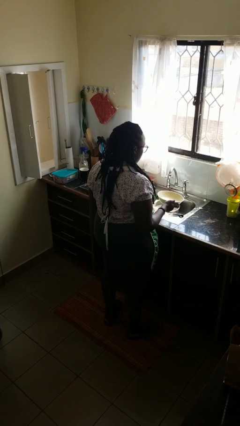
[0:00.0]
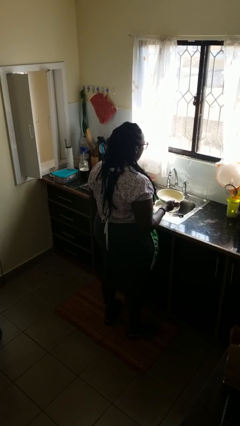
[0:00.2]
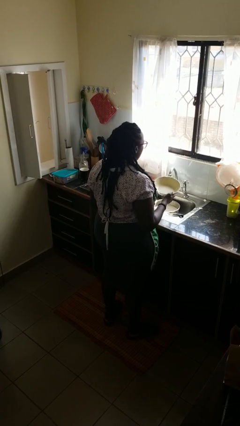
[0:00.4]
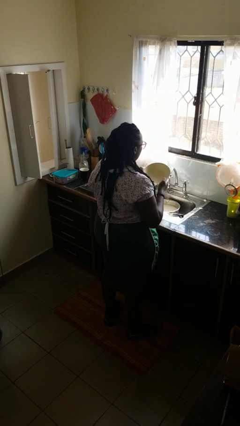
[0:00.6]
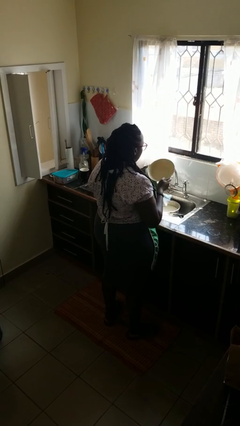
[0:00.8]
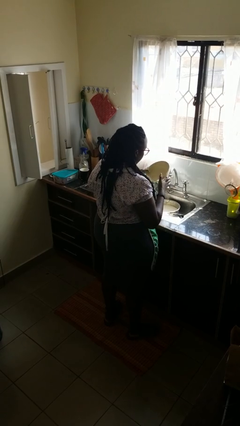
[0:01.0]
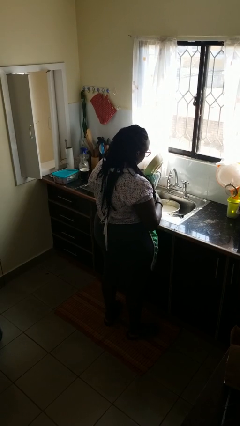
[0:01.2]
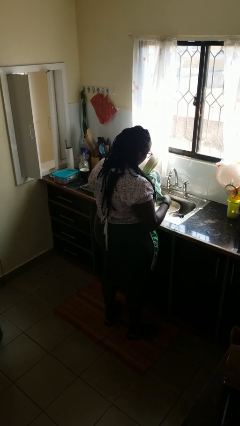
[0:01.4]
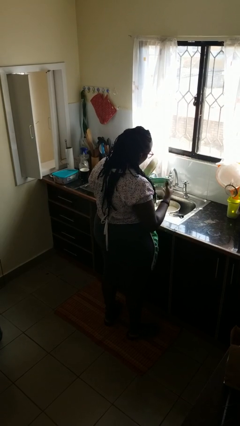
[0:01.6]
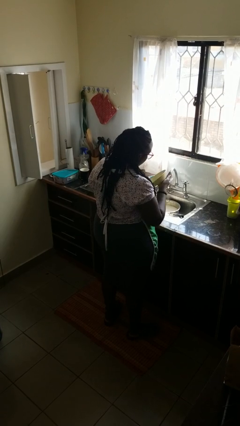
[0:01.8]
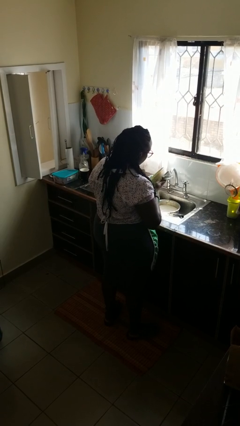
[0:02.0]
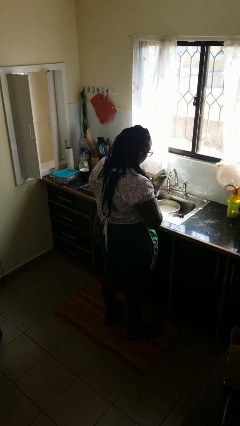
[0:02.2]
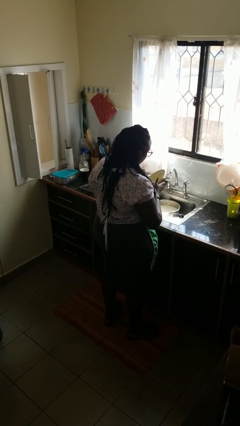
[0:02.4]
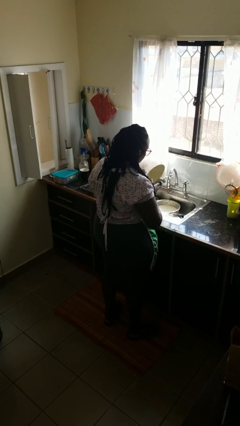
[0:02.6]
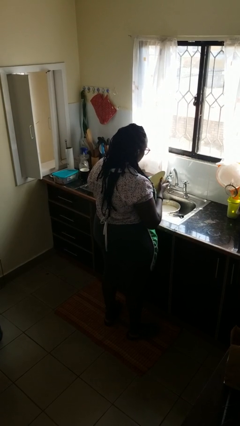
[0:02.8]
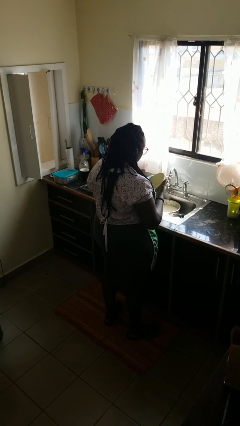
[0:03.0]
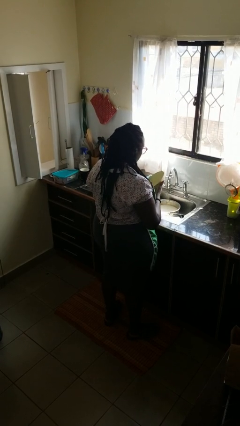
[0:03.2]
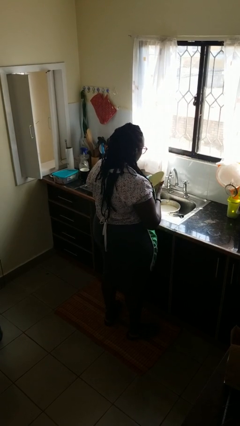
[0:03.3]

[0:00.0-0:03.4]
person dries dish

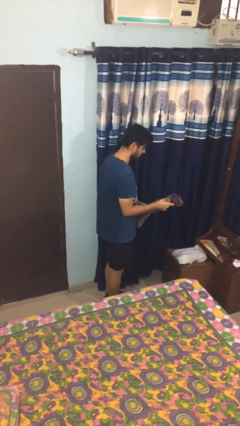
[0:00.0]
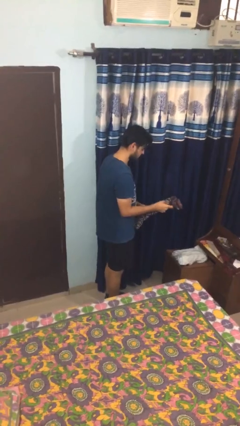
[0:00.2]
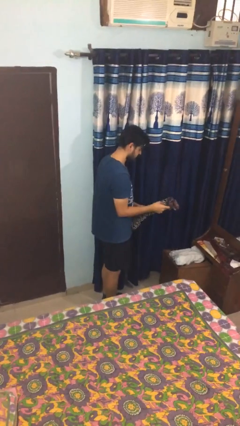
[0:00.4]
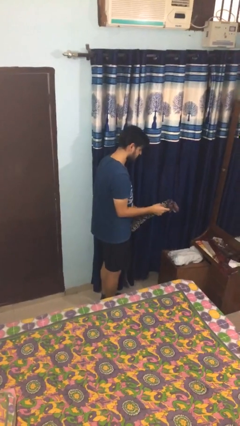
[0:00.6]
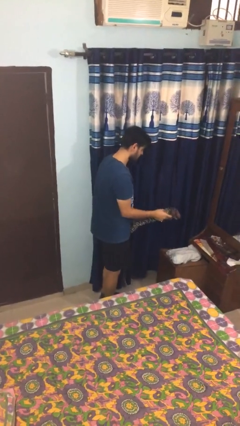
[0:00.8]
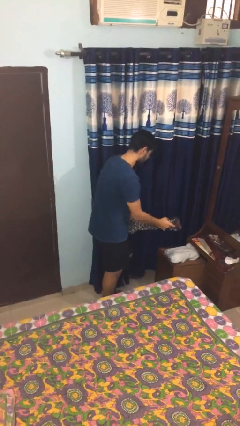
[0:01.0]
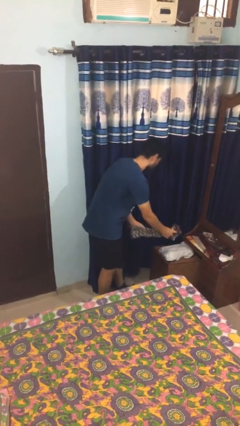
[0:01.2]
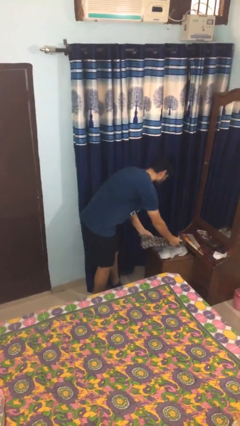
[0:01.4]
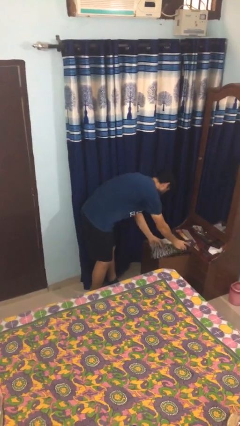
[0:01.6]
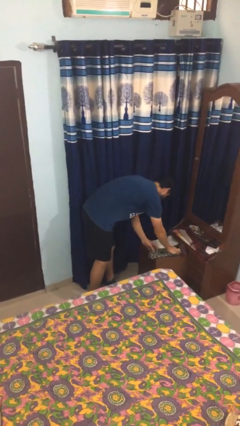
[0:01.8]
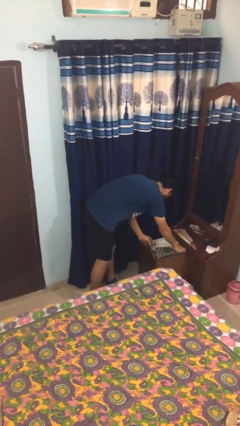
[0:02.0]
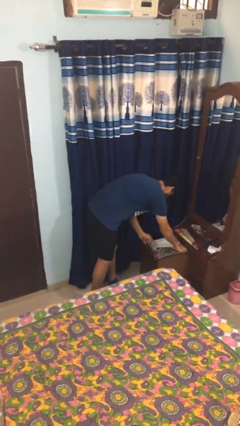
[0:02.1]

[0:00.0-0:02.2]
person puts clothes into dresser

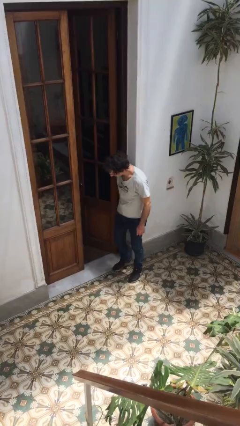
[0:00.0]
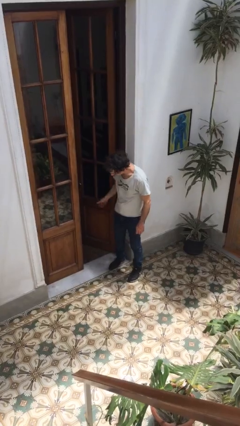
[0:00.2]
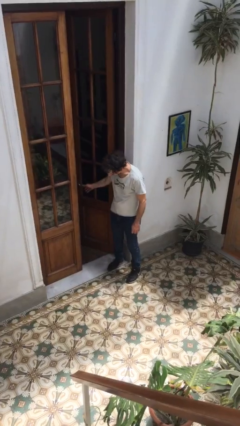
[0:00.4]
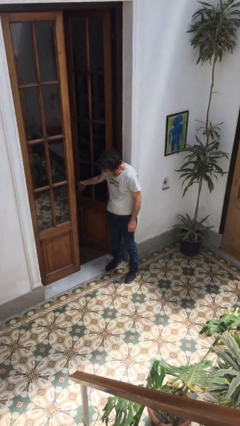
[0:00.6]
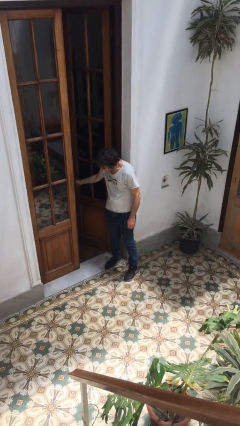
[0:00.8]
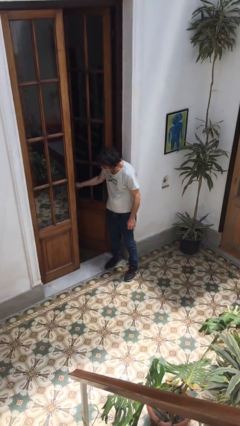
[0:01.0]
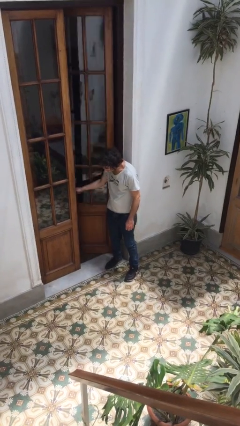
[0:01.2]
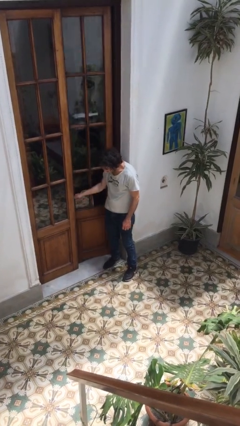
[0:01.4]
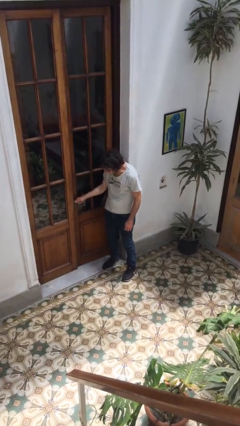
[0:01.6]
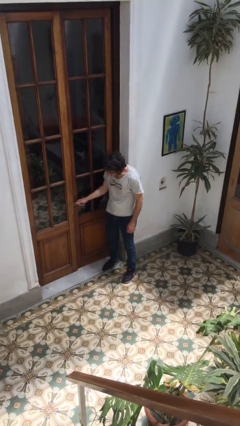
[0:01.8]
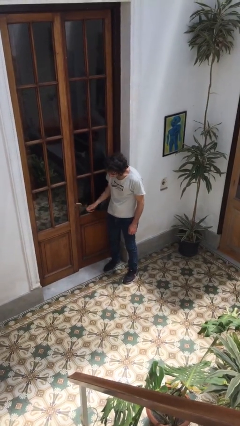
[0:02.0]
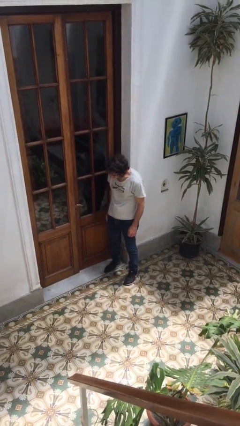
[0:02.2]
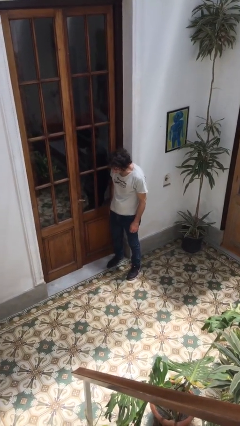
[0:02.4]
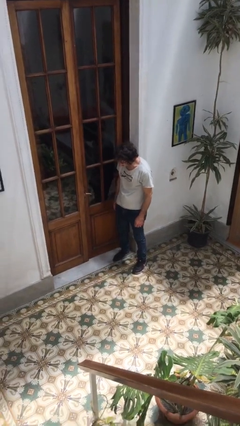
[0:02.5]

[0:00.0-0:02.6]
person closes facility door

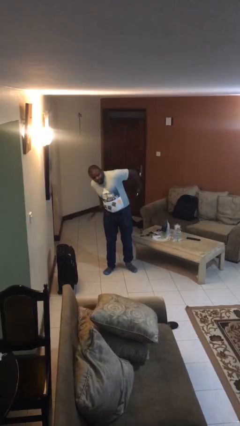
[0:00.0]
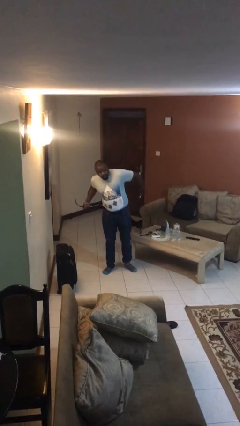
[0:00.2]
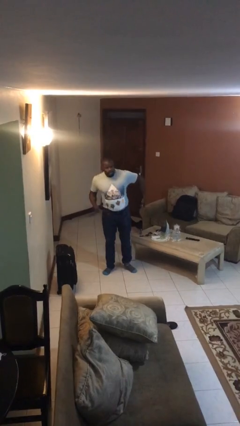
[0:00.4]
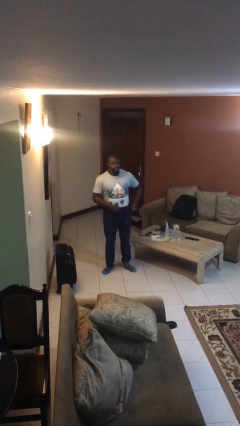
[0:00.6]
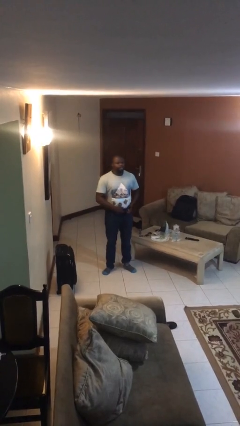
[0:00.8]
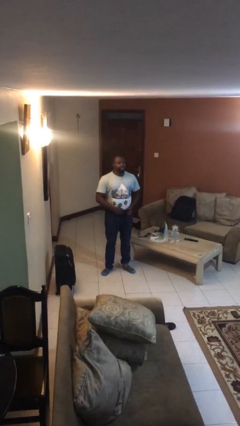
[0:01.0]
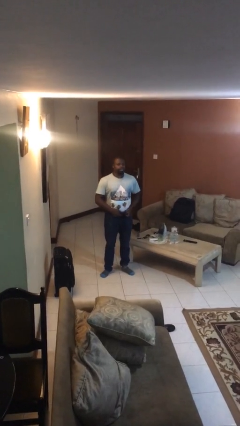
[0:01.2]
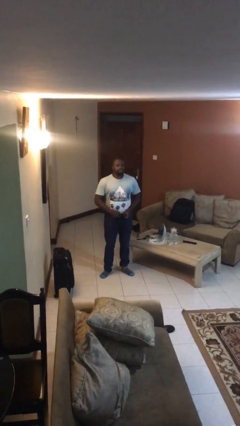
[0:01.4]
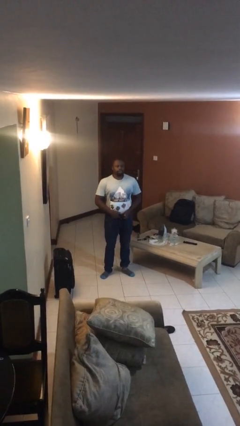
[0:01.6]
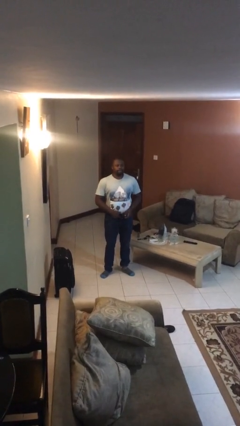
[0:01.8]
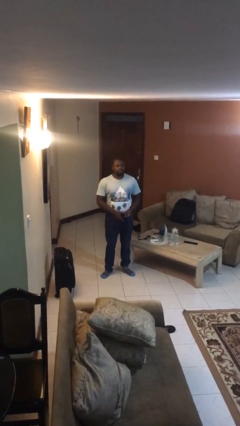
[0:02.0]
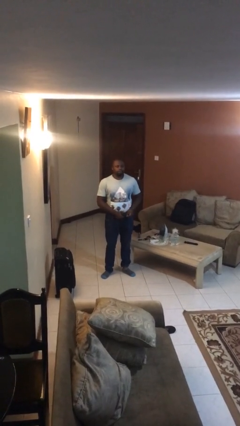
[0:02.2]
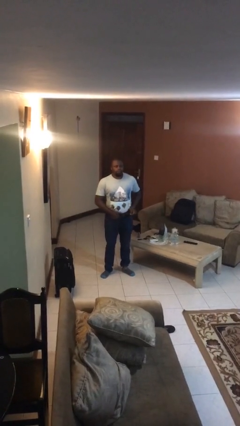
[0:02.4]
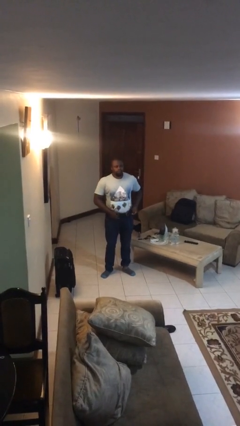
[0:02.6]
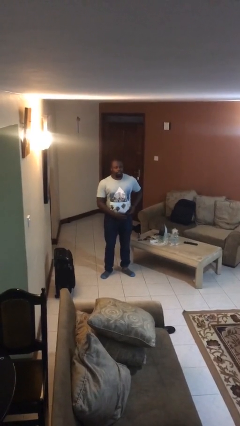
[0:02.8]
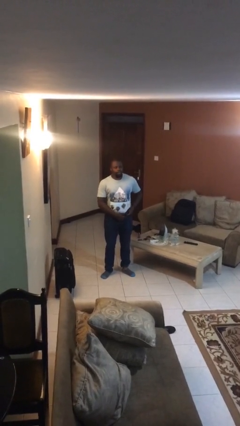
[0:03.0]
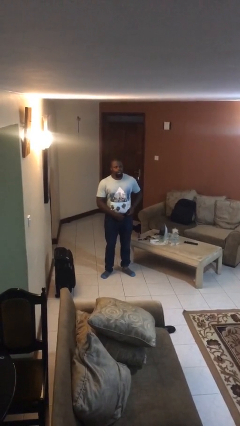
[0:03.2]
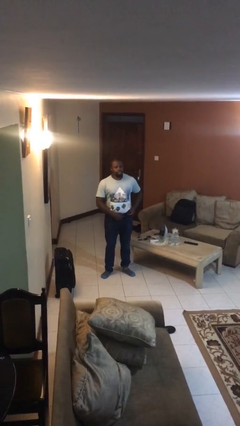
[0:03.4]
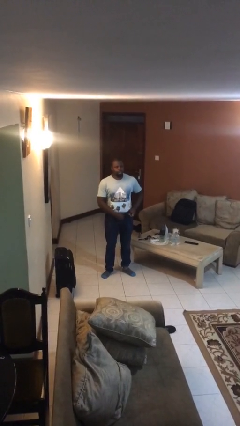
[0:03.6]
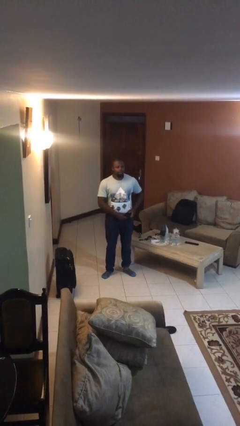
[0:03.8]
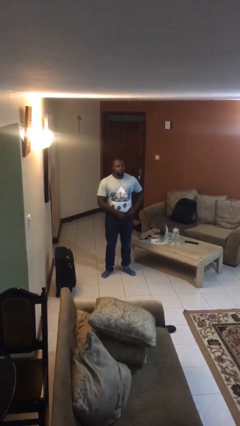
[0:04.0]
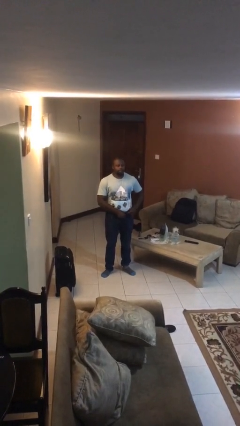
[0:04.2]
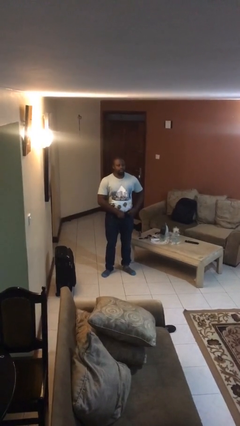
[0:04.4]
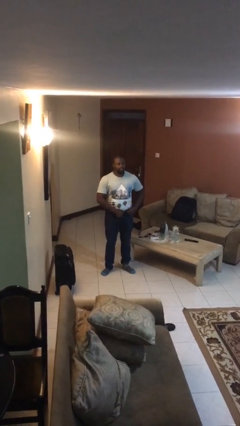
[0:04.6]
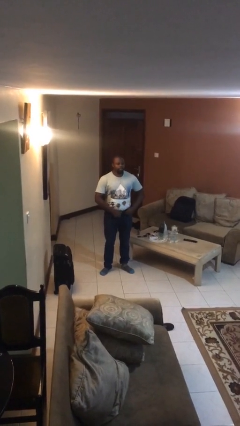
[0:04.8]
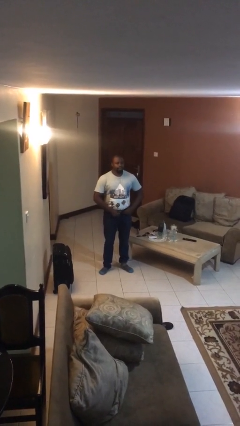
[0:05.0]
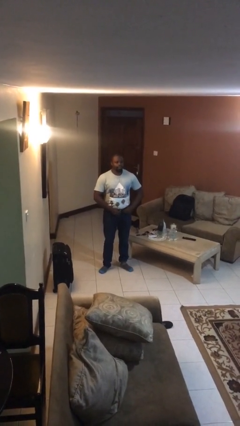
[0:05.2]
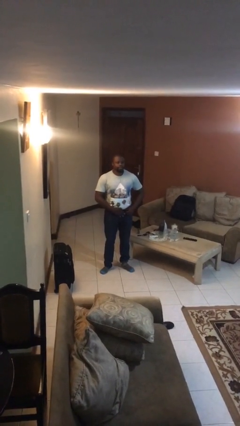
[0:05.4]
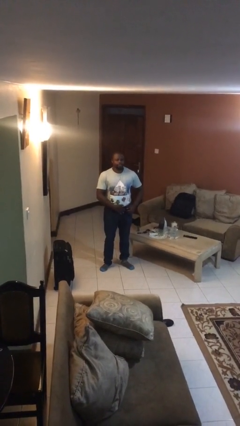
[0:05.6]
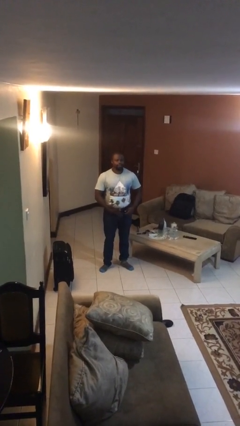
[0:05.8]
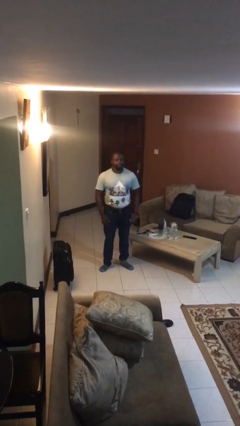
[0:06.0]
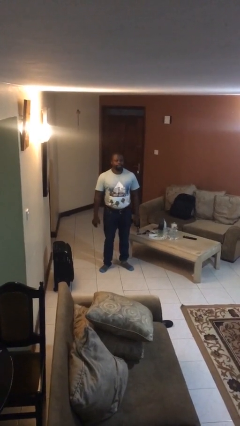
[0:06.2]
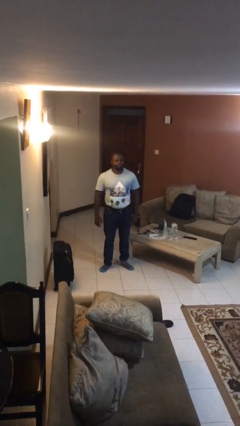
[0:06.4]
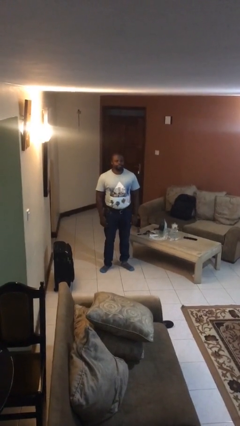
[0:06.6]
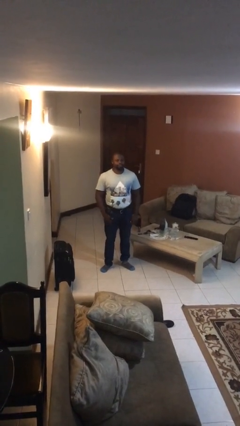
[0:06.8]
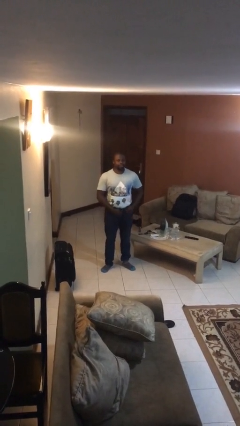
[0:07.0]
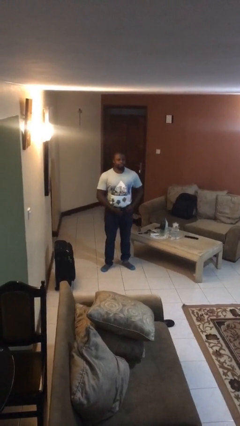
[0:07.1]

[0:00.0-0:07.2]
person puts on belt

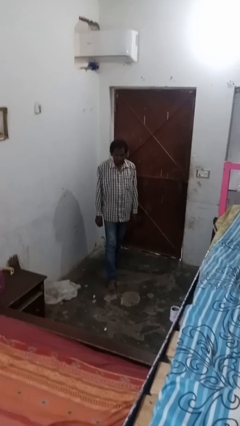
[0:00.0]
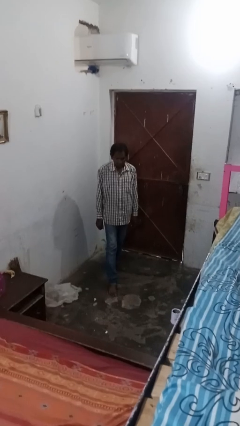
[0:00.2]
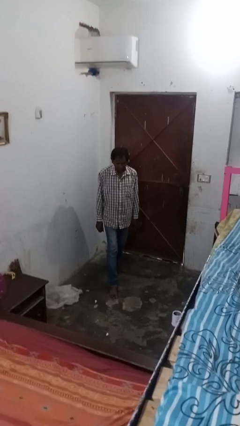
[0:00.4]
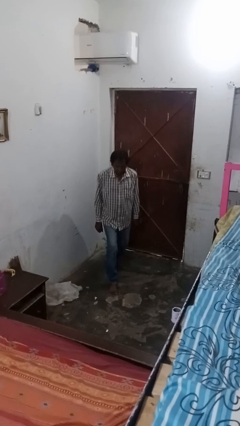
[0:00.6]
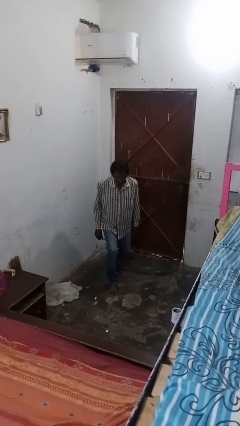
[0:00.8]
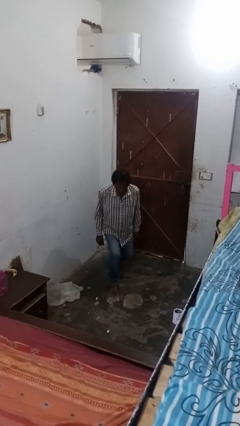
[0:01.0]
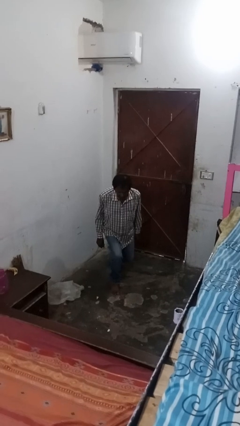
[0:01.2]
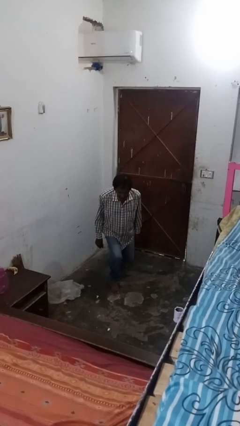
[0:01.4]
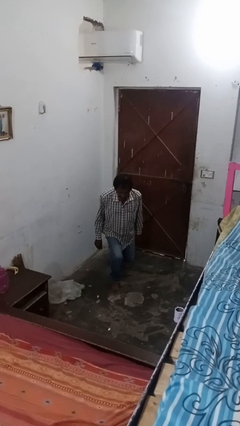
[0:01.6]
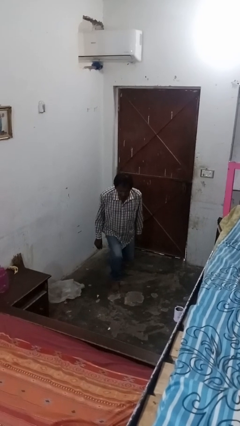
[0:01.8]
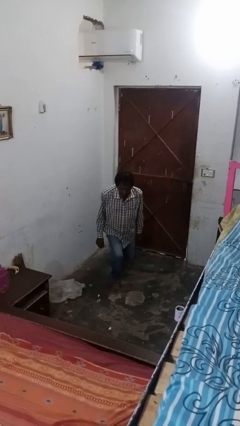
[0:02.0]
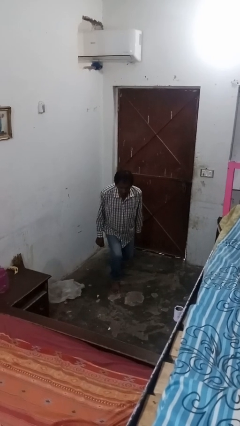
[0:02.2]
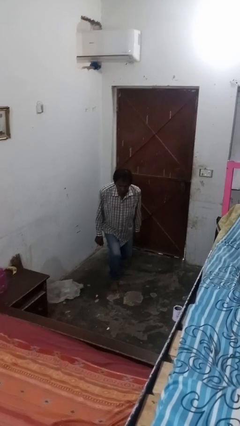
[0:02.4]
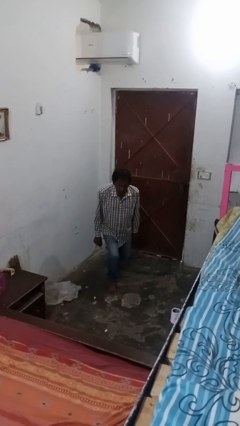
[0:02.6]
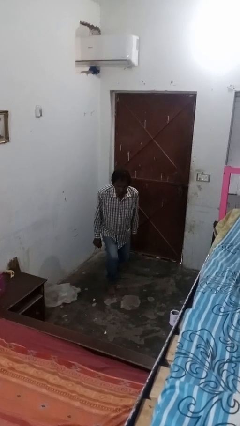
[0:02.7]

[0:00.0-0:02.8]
person exercises with lunges
